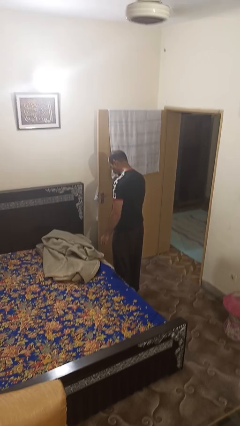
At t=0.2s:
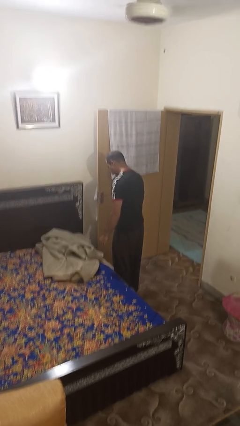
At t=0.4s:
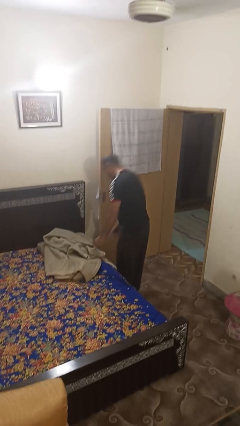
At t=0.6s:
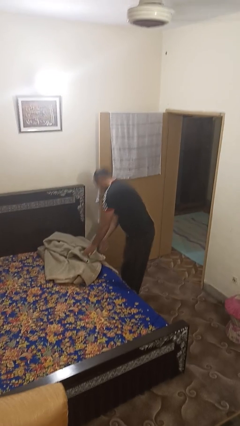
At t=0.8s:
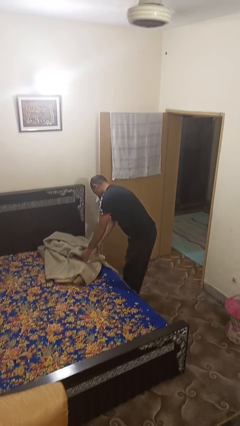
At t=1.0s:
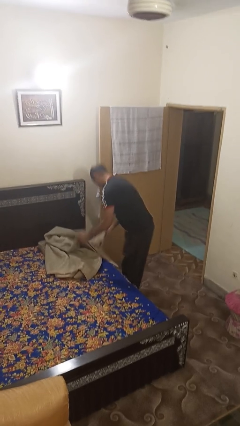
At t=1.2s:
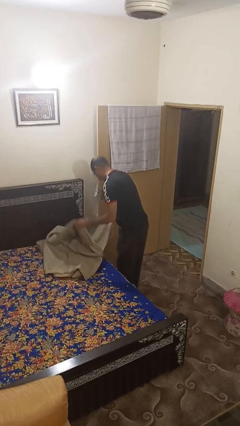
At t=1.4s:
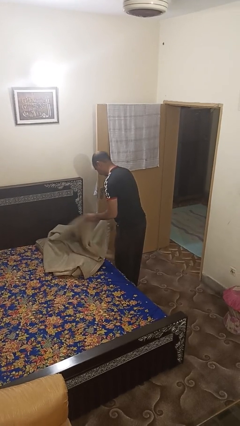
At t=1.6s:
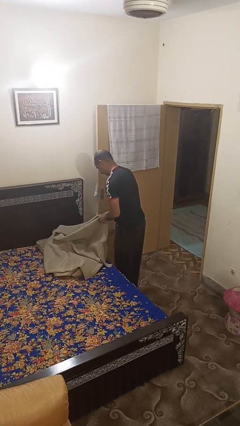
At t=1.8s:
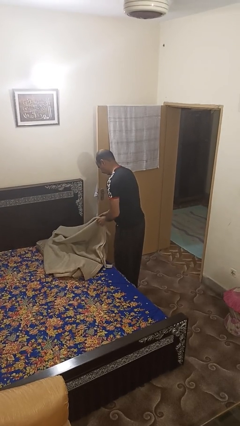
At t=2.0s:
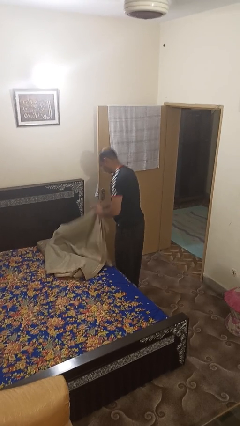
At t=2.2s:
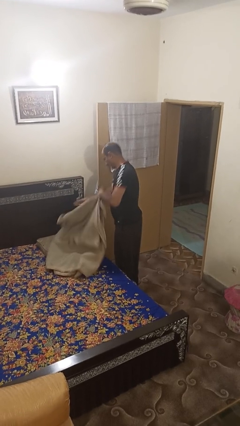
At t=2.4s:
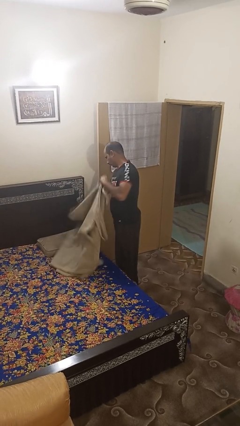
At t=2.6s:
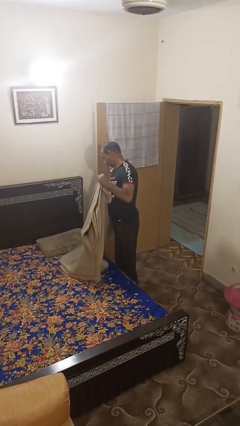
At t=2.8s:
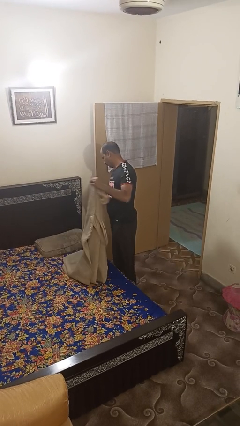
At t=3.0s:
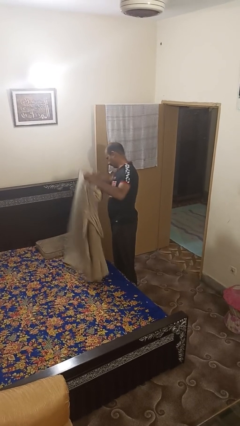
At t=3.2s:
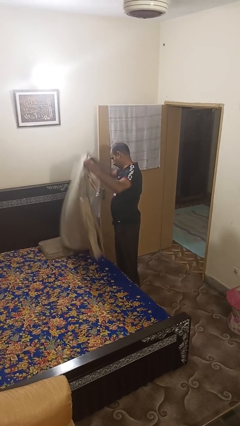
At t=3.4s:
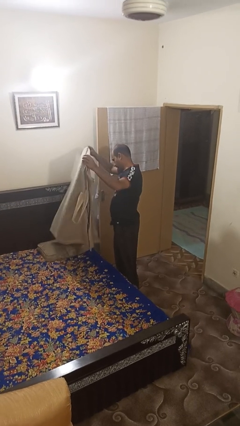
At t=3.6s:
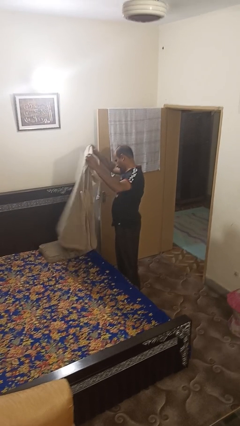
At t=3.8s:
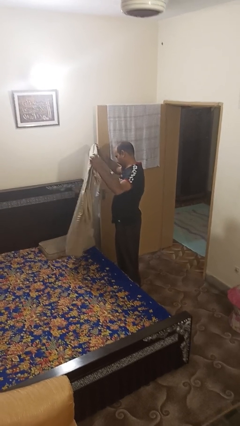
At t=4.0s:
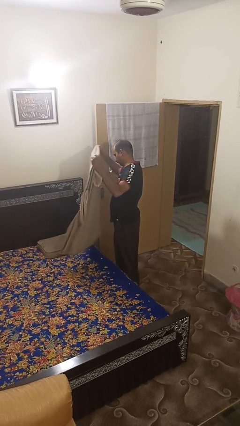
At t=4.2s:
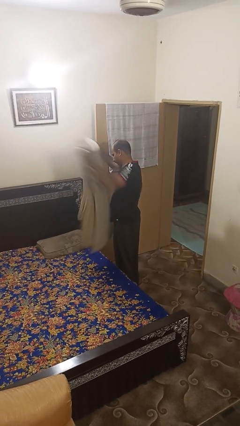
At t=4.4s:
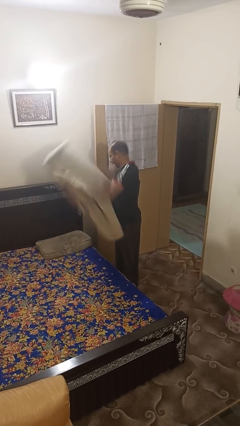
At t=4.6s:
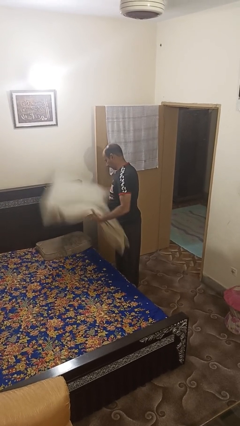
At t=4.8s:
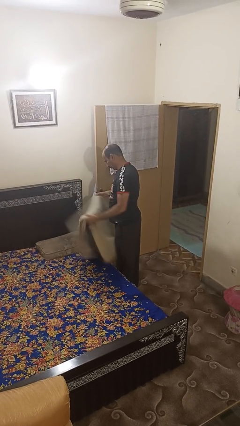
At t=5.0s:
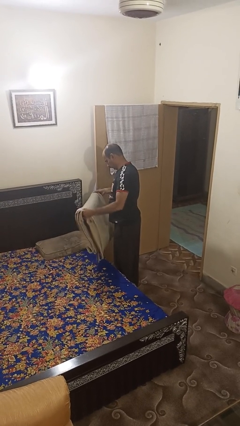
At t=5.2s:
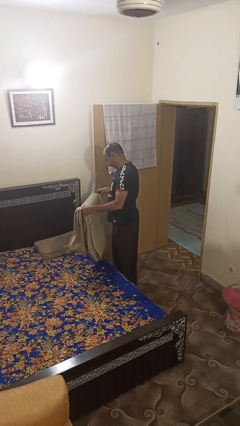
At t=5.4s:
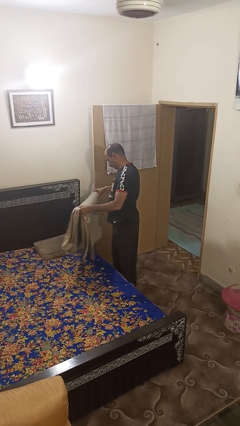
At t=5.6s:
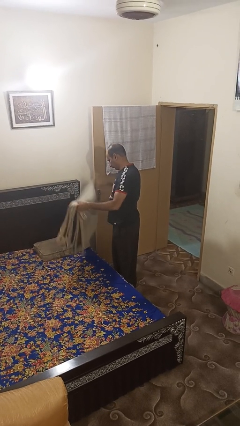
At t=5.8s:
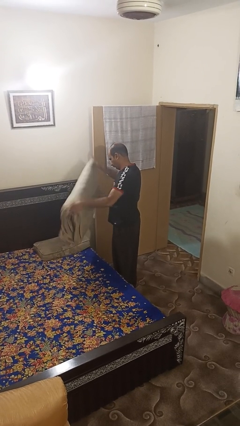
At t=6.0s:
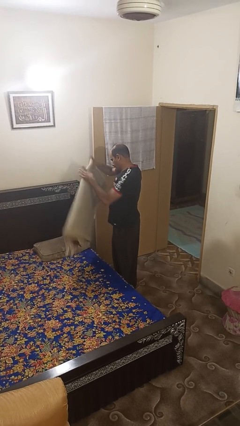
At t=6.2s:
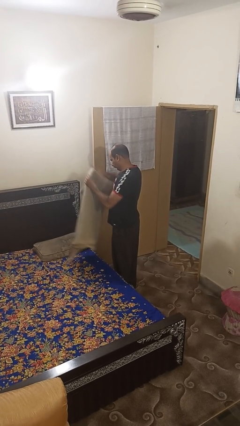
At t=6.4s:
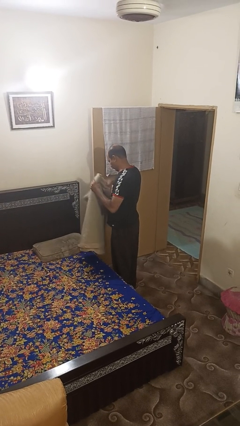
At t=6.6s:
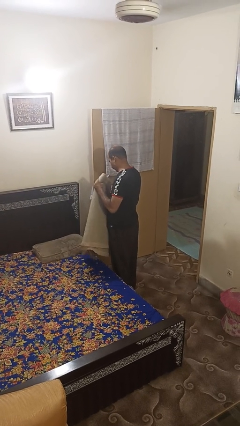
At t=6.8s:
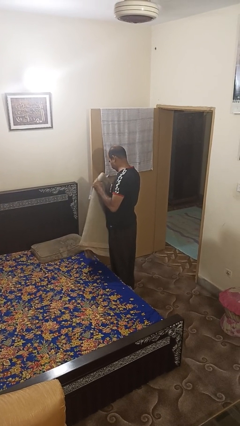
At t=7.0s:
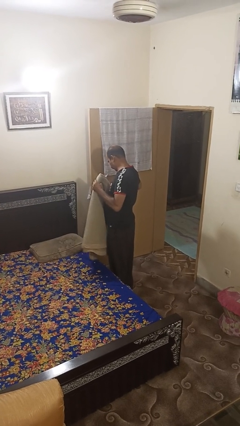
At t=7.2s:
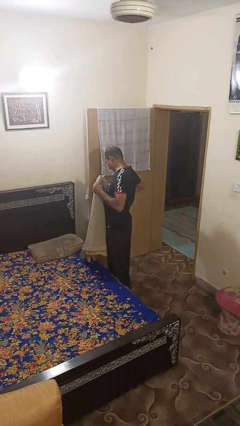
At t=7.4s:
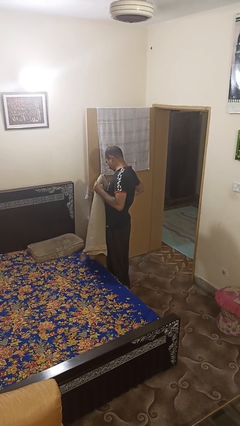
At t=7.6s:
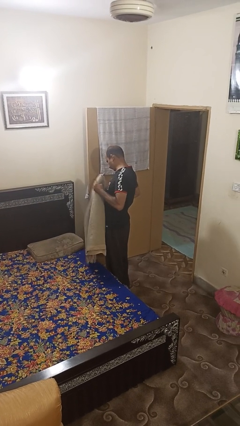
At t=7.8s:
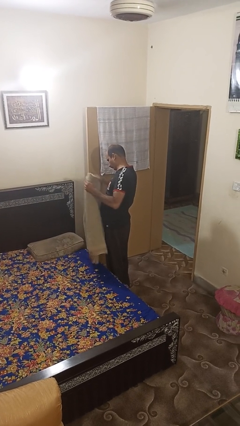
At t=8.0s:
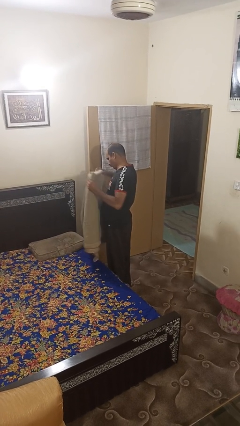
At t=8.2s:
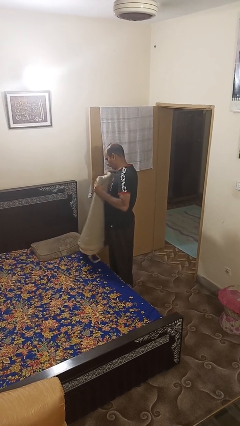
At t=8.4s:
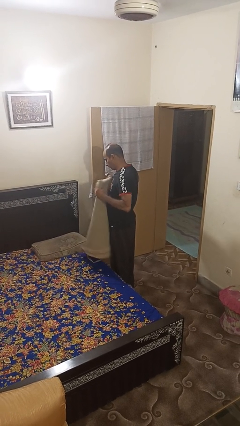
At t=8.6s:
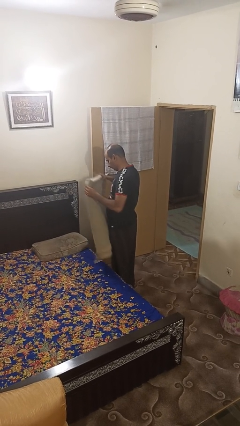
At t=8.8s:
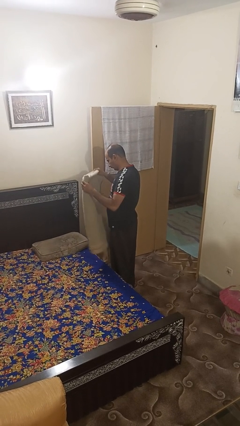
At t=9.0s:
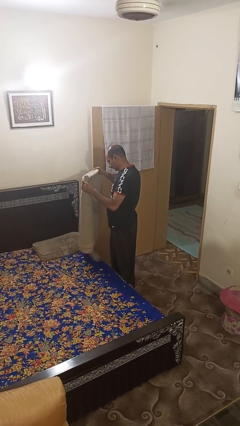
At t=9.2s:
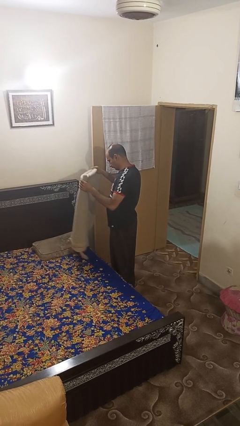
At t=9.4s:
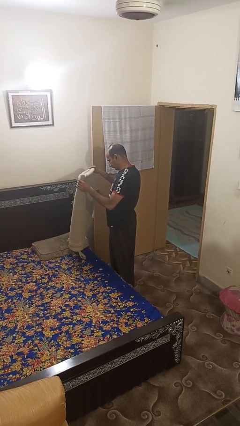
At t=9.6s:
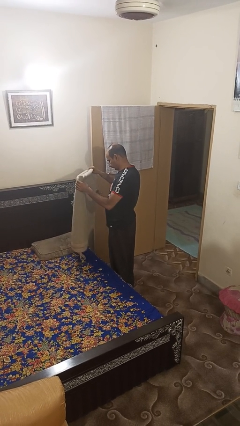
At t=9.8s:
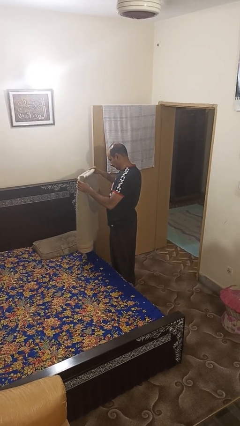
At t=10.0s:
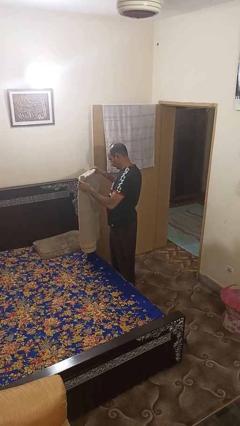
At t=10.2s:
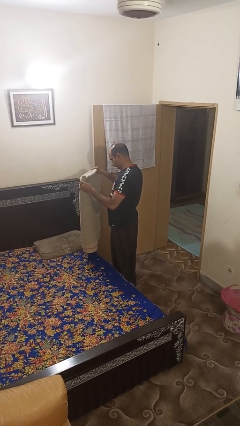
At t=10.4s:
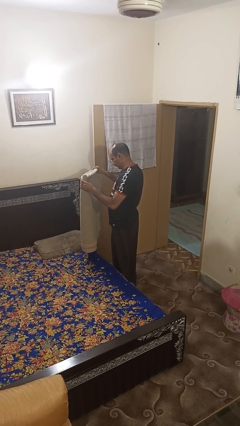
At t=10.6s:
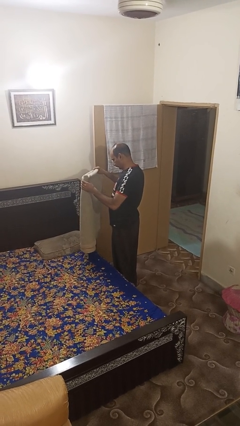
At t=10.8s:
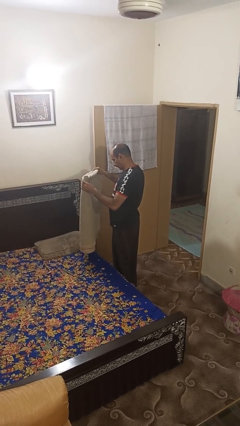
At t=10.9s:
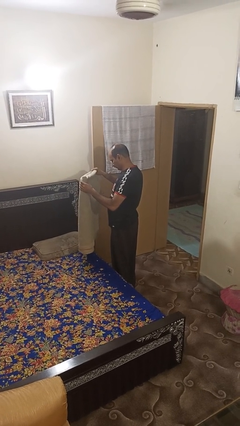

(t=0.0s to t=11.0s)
person folds blanket

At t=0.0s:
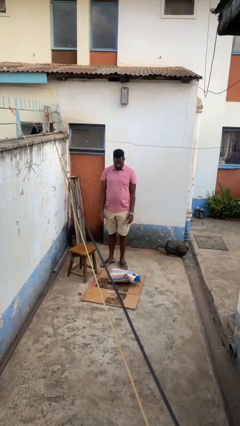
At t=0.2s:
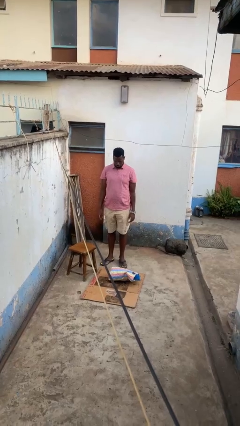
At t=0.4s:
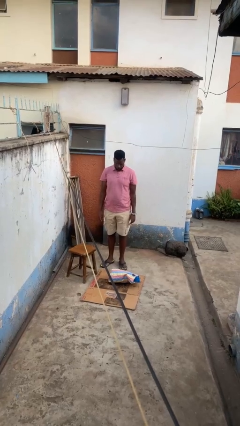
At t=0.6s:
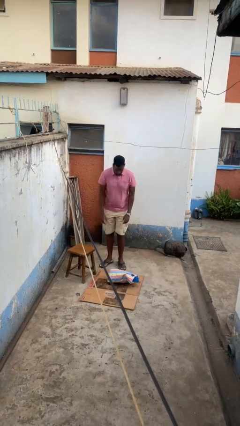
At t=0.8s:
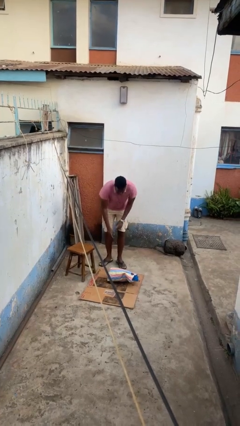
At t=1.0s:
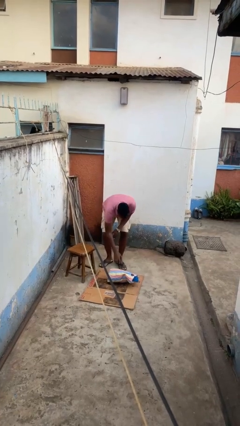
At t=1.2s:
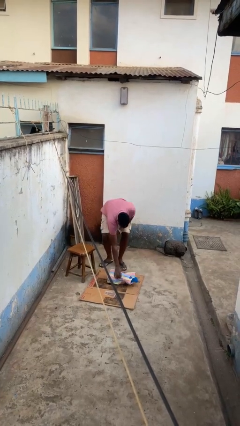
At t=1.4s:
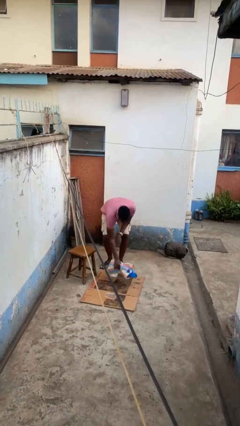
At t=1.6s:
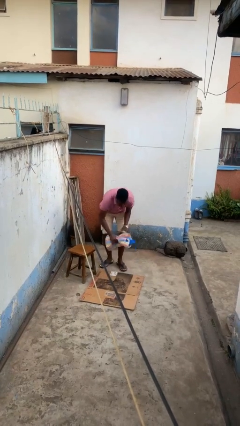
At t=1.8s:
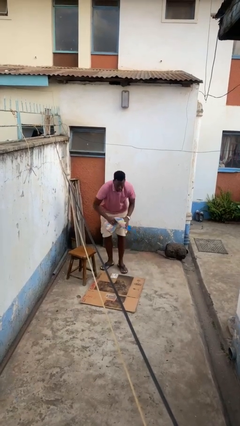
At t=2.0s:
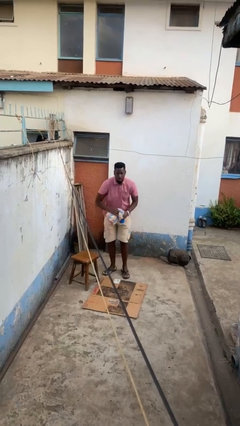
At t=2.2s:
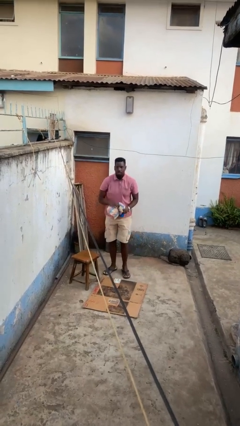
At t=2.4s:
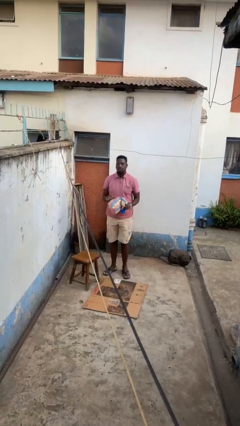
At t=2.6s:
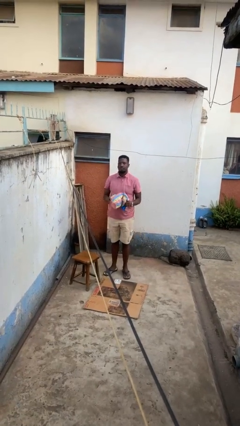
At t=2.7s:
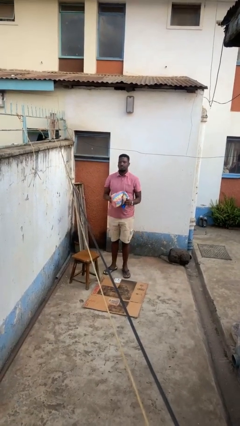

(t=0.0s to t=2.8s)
person picks up object from floor

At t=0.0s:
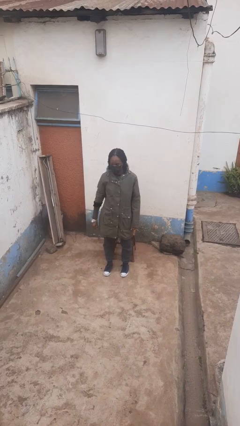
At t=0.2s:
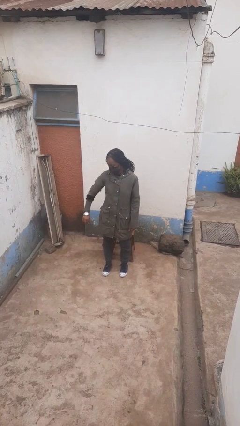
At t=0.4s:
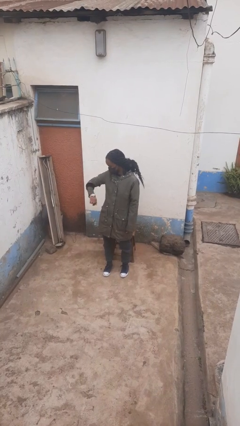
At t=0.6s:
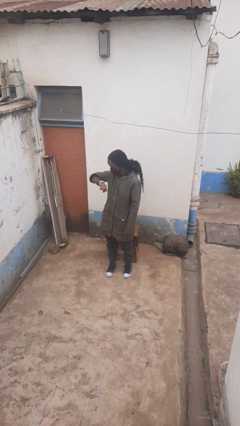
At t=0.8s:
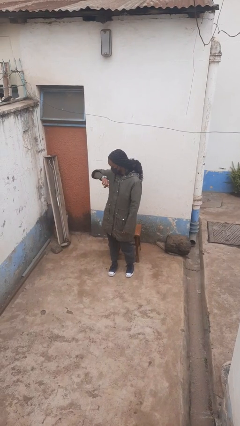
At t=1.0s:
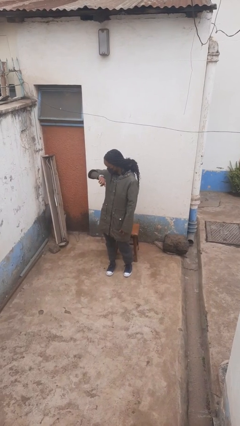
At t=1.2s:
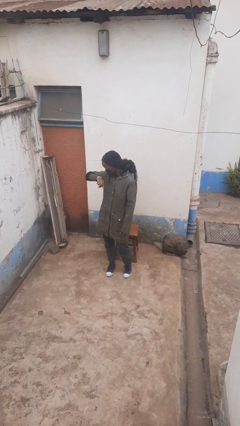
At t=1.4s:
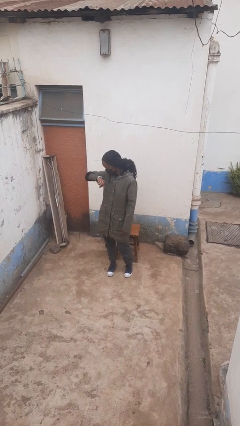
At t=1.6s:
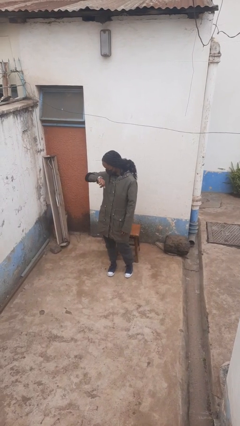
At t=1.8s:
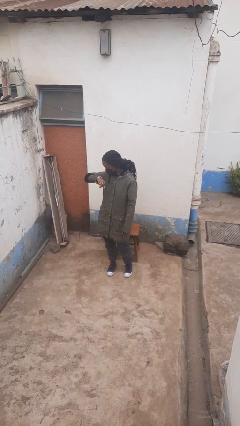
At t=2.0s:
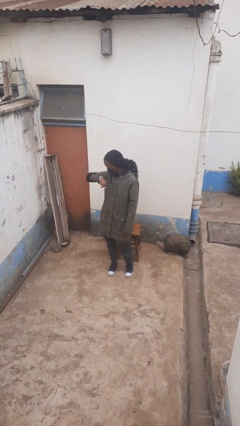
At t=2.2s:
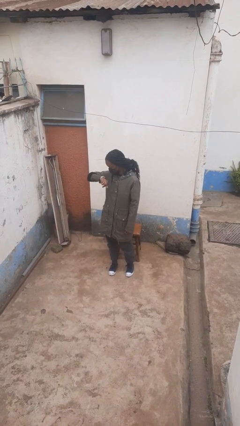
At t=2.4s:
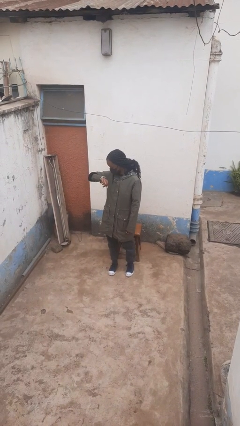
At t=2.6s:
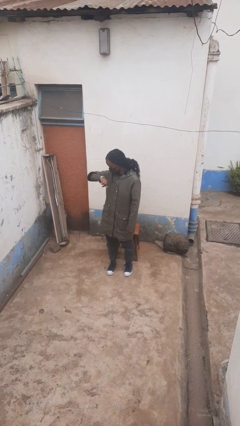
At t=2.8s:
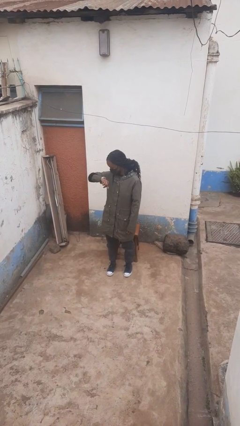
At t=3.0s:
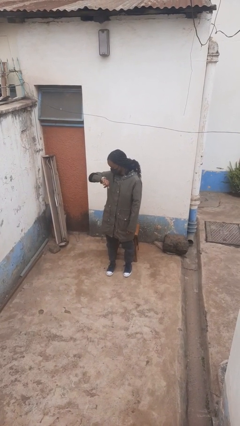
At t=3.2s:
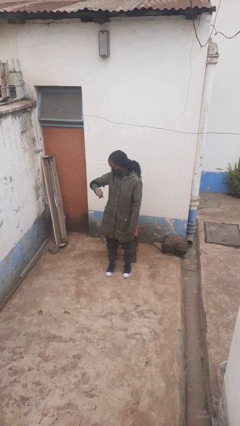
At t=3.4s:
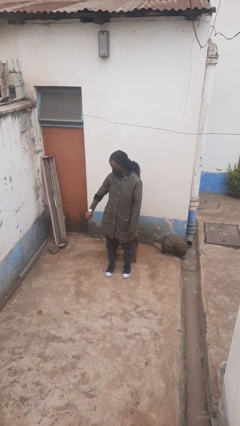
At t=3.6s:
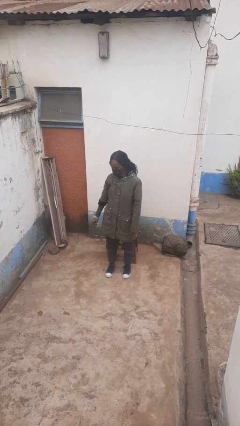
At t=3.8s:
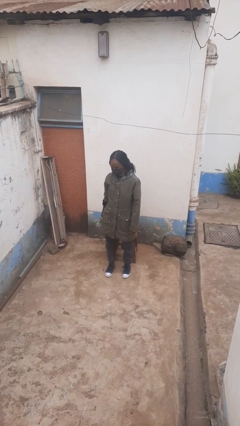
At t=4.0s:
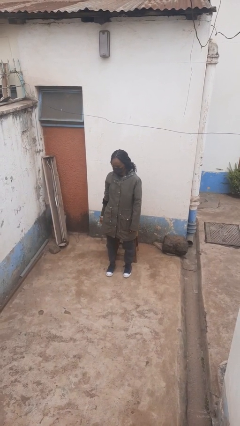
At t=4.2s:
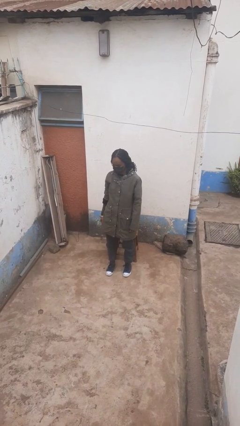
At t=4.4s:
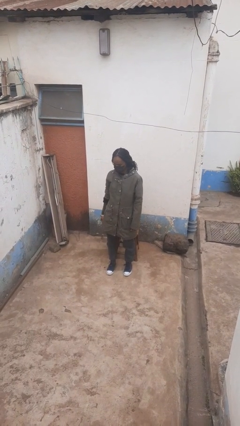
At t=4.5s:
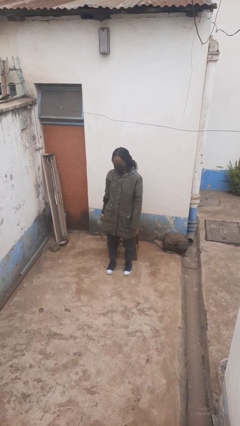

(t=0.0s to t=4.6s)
person looks at wristwatch
